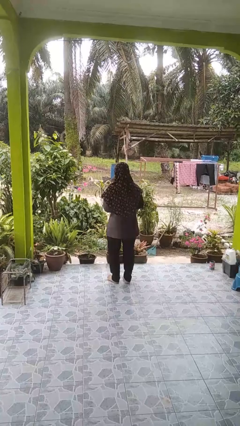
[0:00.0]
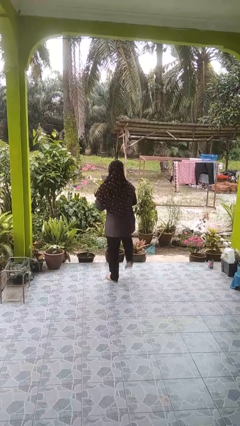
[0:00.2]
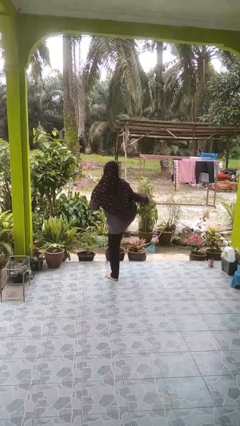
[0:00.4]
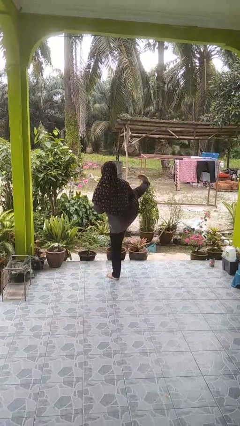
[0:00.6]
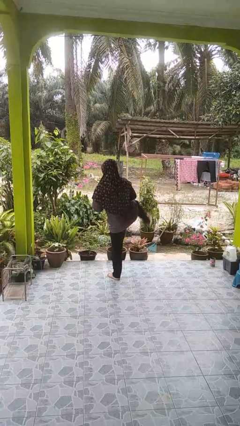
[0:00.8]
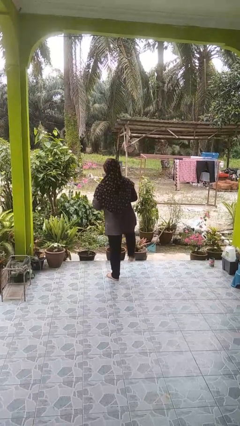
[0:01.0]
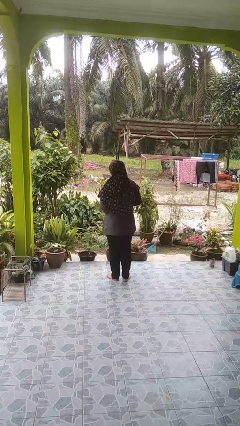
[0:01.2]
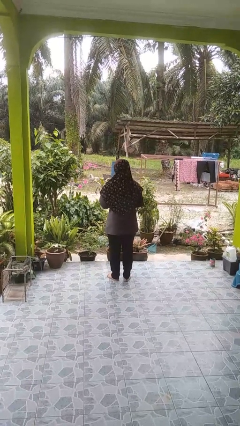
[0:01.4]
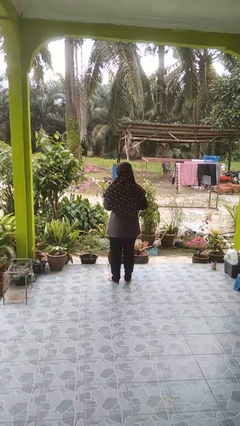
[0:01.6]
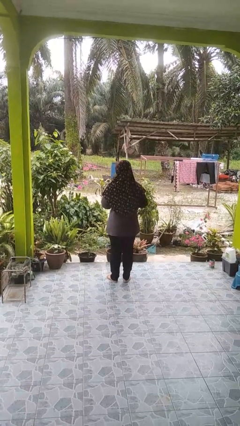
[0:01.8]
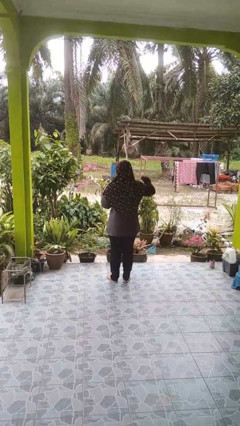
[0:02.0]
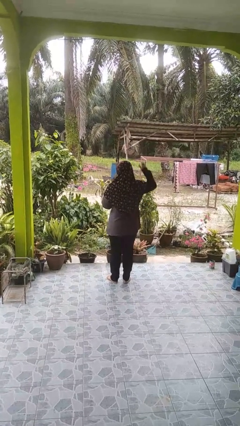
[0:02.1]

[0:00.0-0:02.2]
person karate kicks

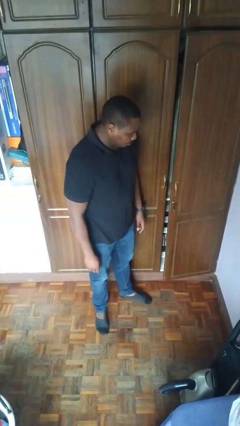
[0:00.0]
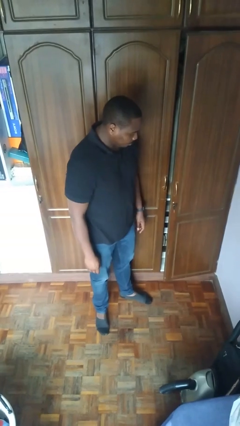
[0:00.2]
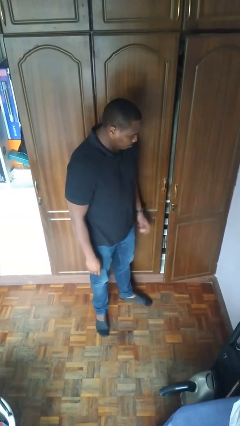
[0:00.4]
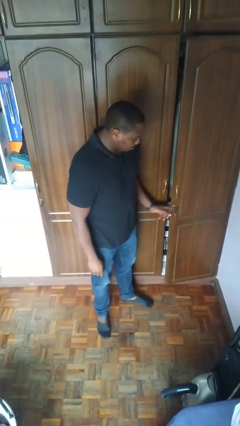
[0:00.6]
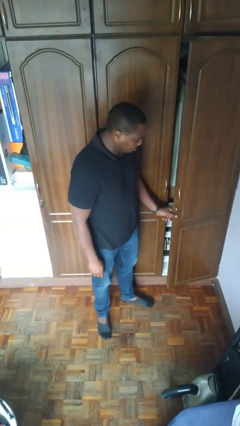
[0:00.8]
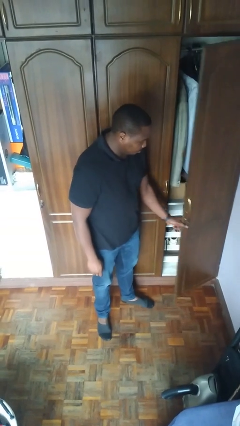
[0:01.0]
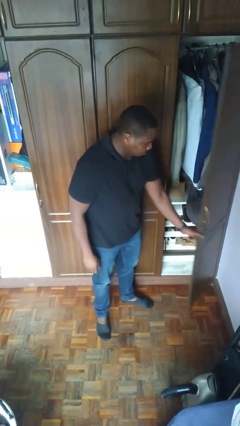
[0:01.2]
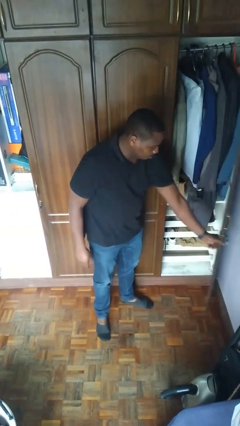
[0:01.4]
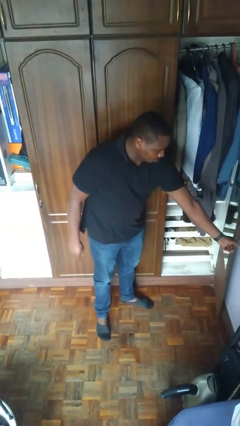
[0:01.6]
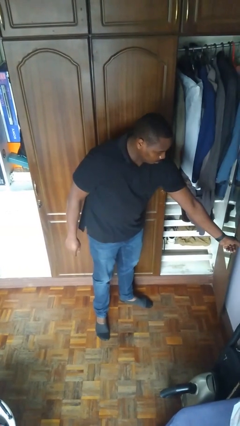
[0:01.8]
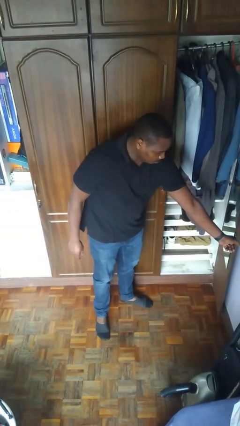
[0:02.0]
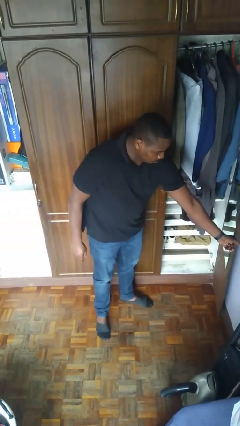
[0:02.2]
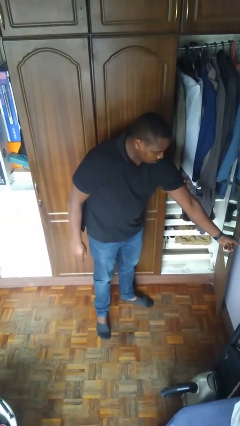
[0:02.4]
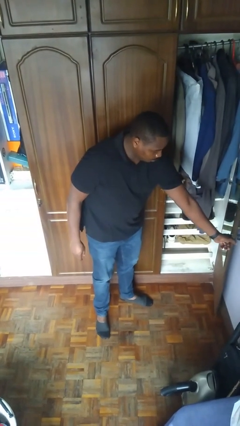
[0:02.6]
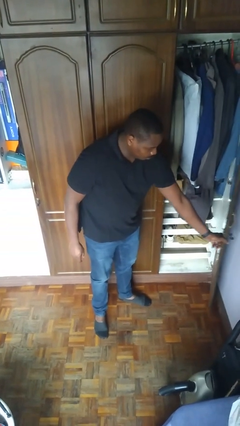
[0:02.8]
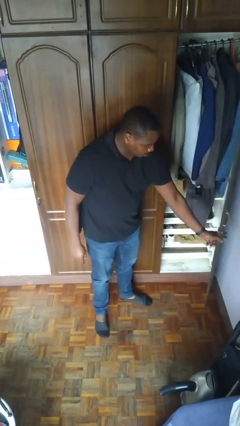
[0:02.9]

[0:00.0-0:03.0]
person opens closet door

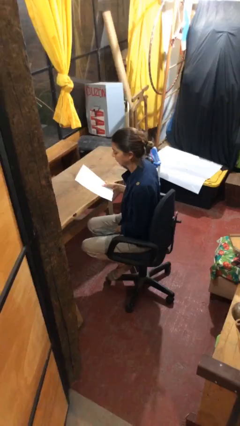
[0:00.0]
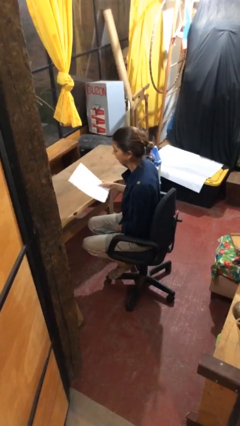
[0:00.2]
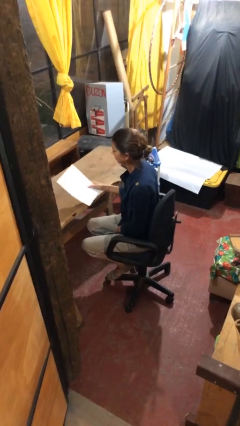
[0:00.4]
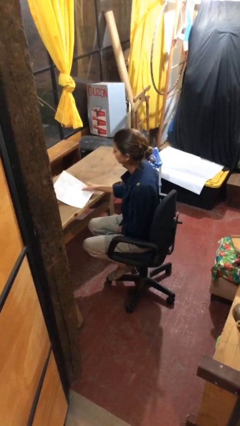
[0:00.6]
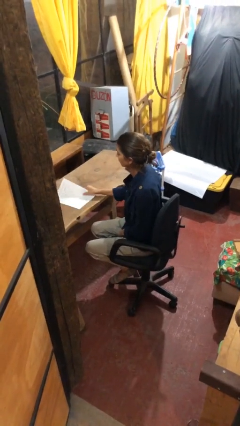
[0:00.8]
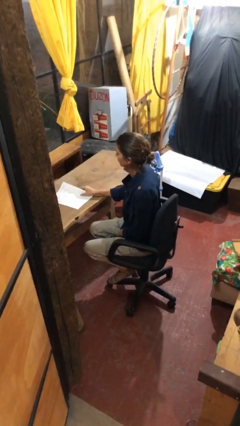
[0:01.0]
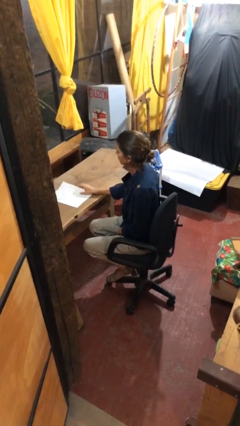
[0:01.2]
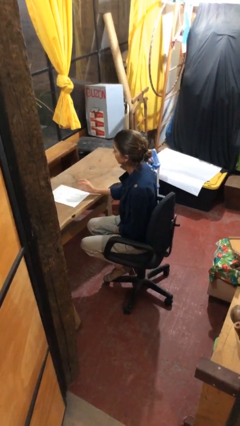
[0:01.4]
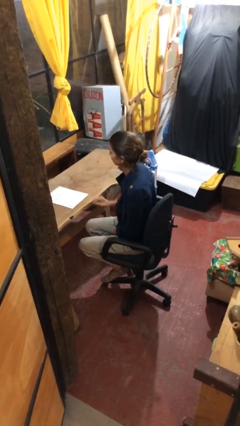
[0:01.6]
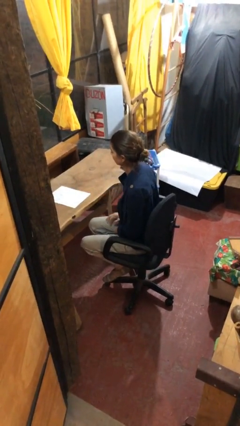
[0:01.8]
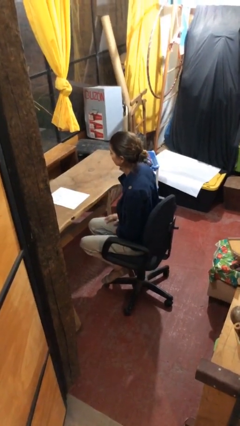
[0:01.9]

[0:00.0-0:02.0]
person puts down object on table

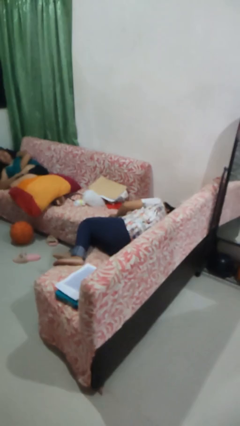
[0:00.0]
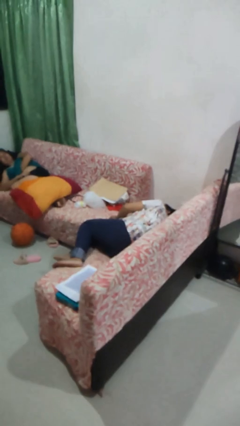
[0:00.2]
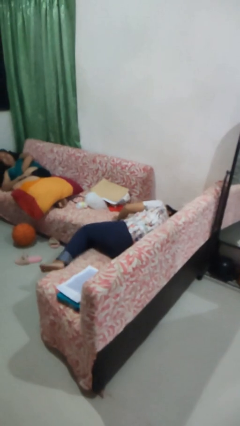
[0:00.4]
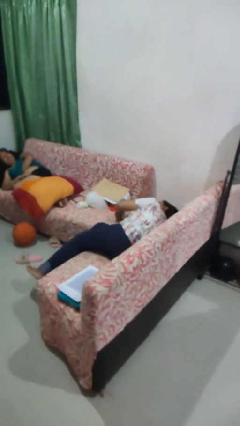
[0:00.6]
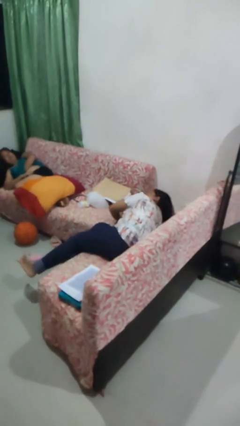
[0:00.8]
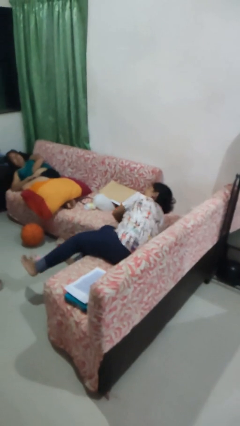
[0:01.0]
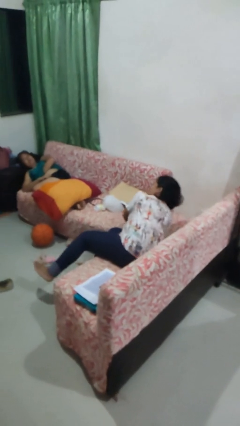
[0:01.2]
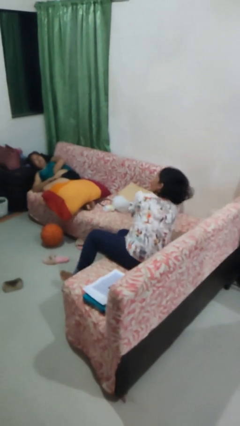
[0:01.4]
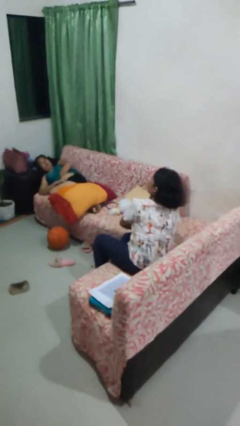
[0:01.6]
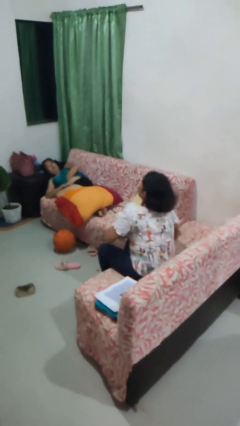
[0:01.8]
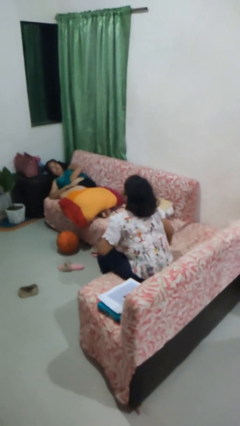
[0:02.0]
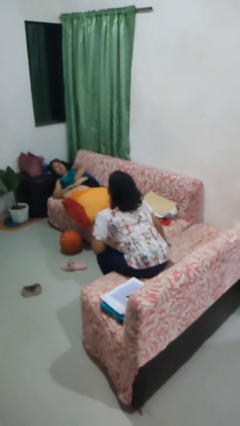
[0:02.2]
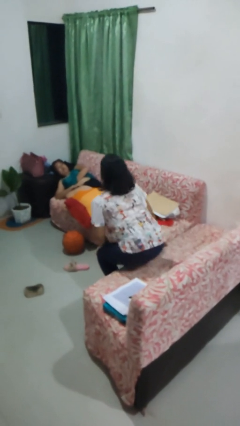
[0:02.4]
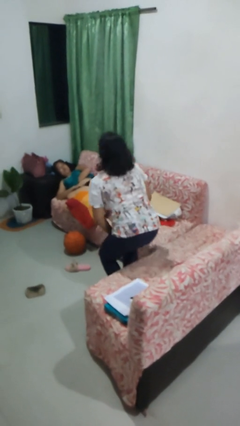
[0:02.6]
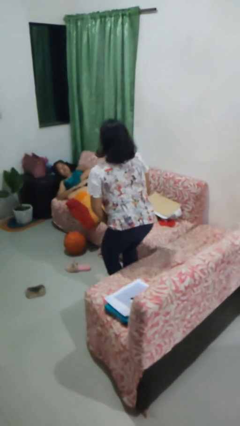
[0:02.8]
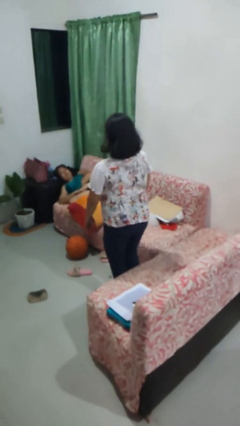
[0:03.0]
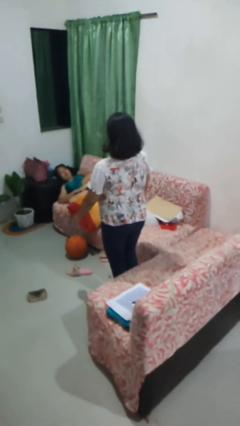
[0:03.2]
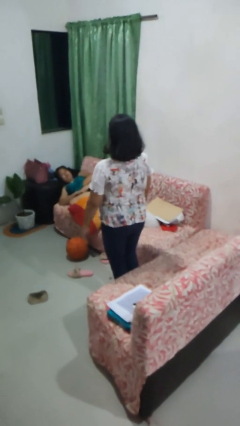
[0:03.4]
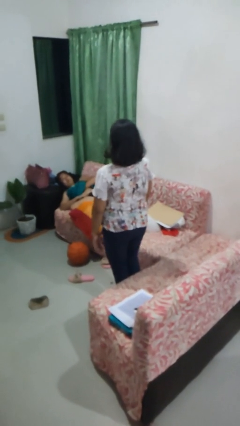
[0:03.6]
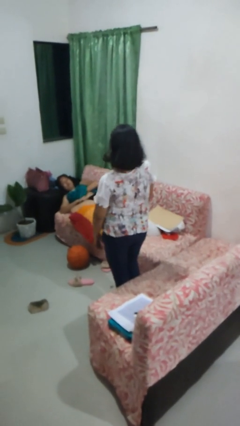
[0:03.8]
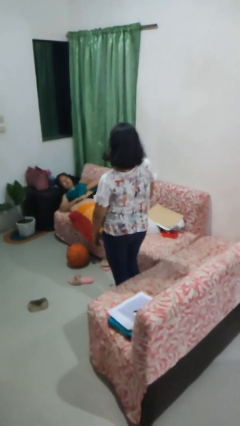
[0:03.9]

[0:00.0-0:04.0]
person stands up

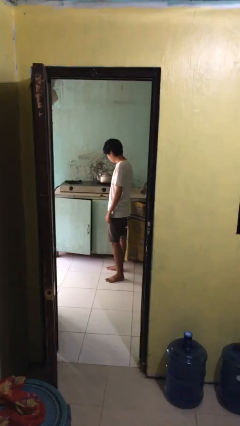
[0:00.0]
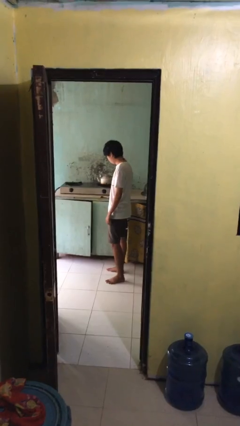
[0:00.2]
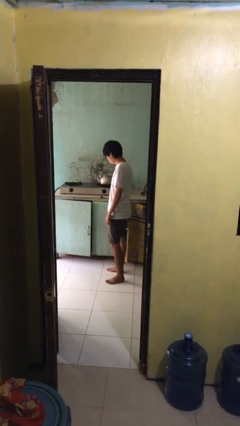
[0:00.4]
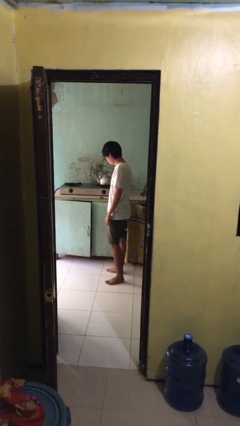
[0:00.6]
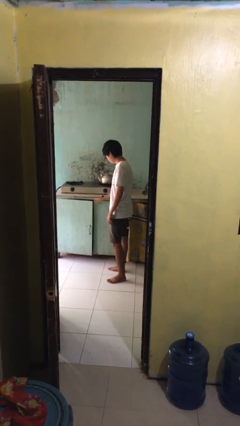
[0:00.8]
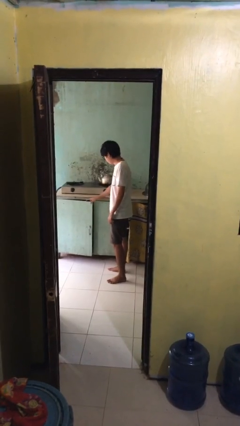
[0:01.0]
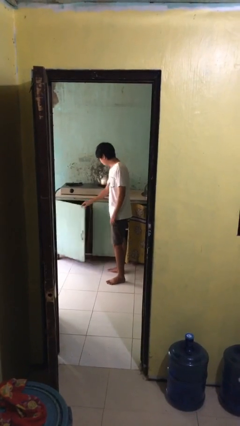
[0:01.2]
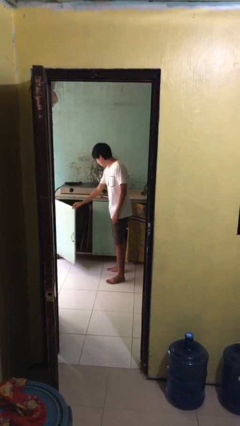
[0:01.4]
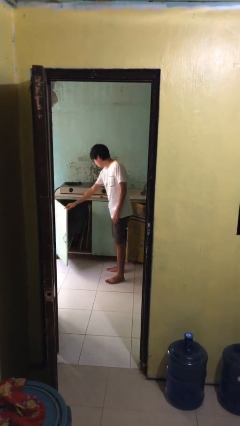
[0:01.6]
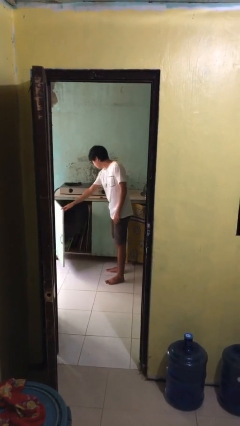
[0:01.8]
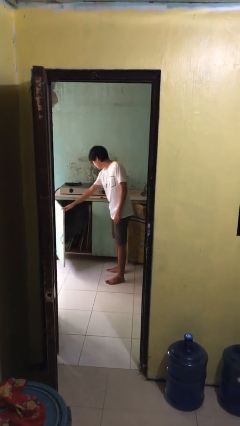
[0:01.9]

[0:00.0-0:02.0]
person opens cabinet

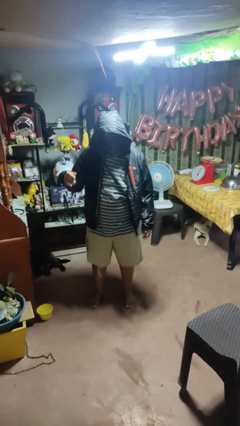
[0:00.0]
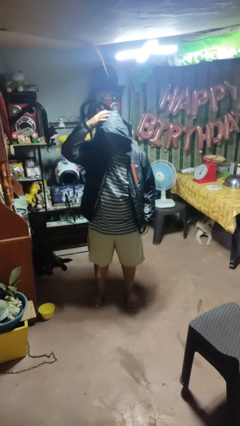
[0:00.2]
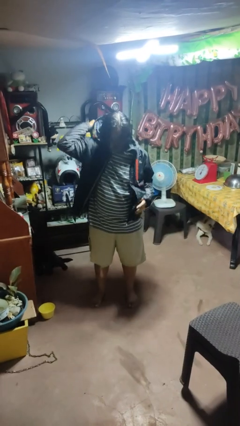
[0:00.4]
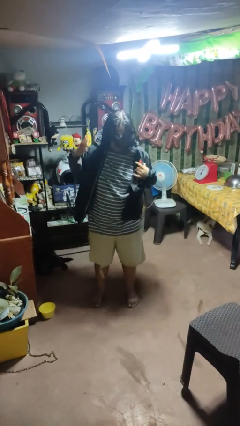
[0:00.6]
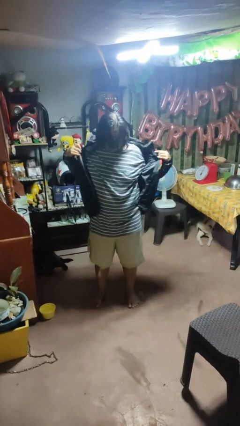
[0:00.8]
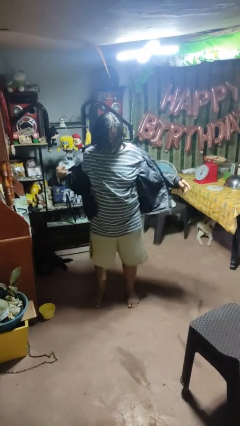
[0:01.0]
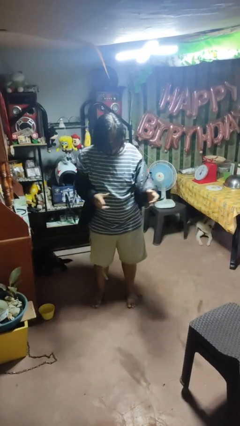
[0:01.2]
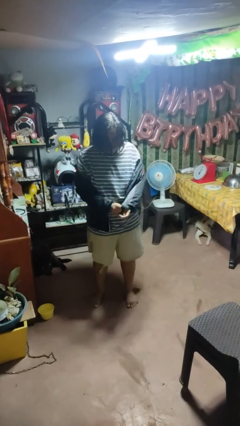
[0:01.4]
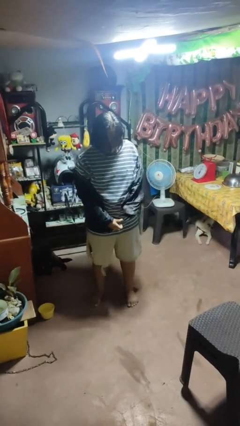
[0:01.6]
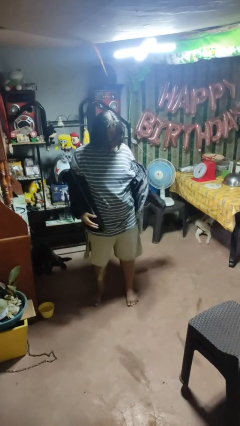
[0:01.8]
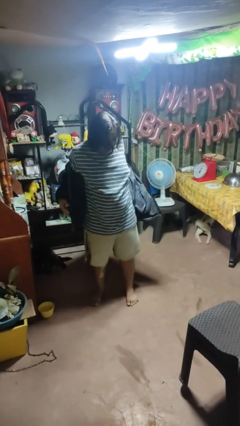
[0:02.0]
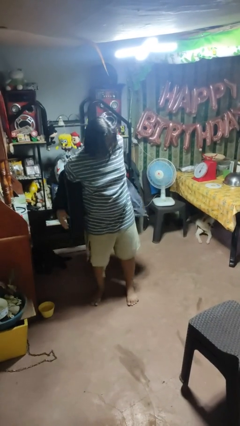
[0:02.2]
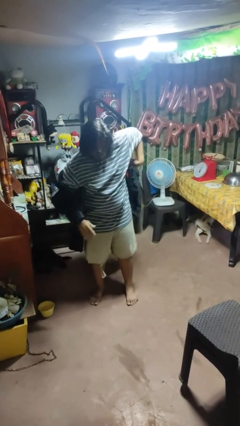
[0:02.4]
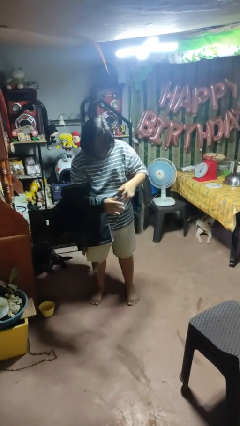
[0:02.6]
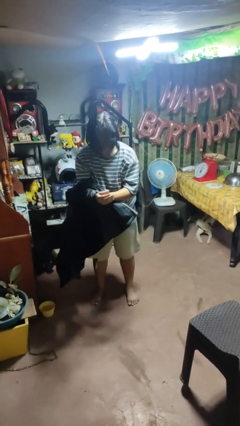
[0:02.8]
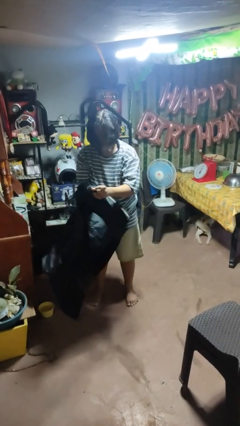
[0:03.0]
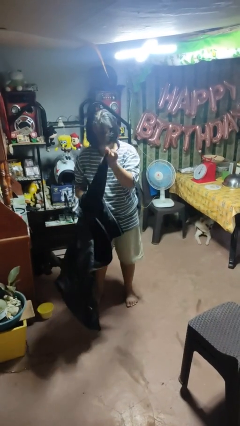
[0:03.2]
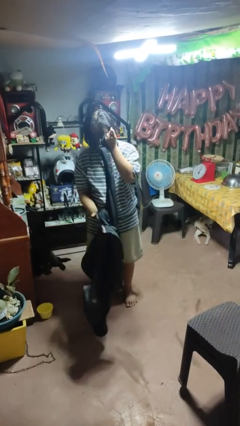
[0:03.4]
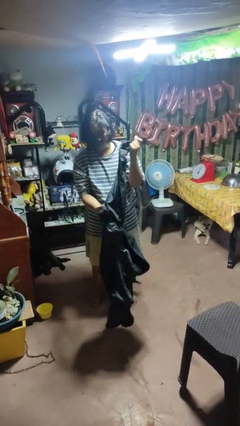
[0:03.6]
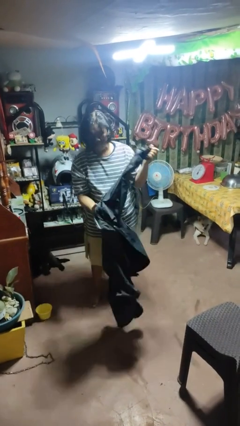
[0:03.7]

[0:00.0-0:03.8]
person takes off hoodie

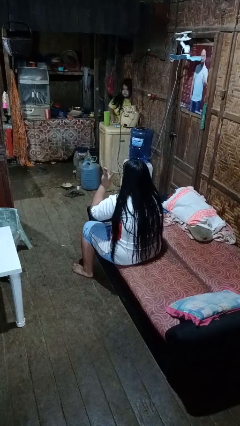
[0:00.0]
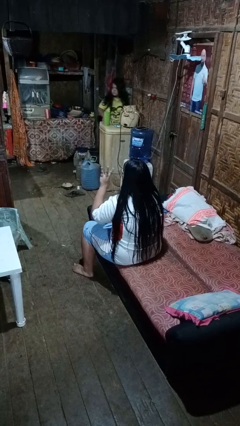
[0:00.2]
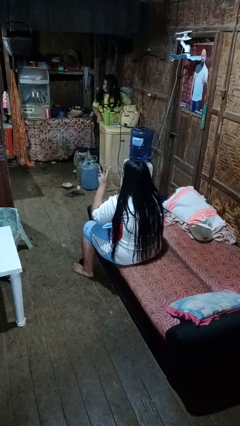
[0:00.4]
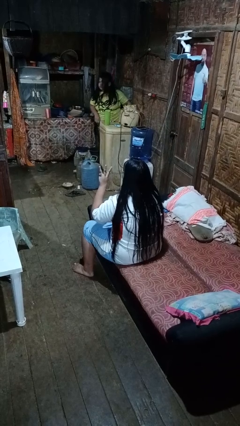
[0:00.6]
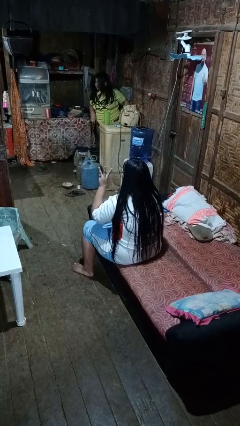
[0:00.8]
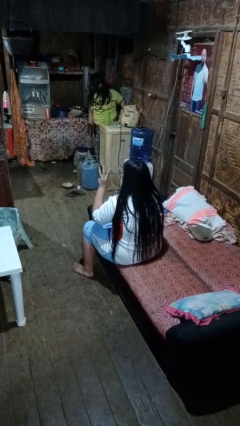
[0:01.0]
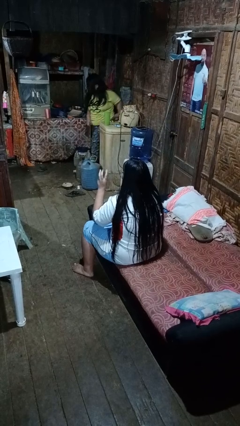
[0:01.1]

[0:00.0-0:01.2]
person gestures number three
